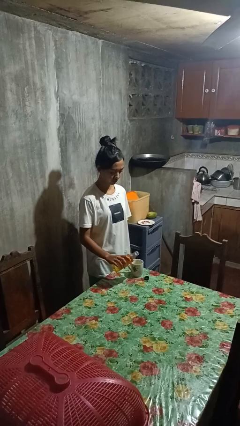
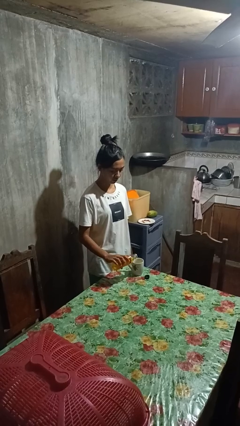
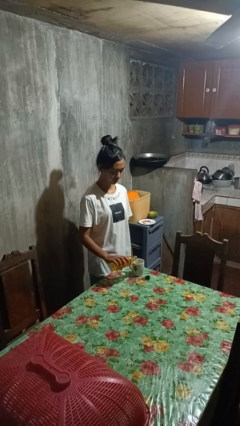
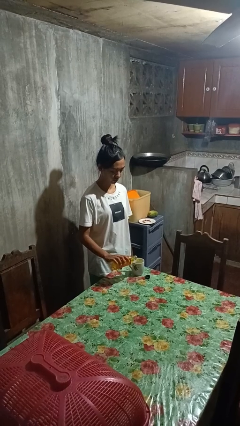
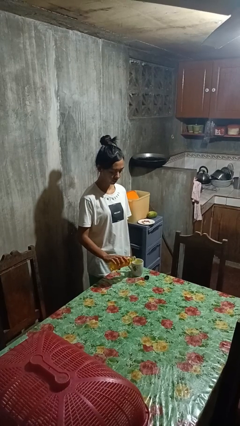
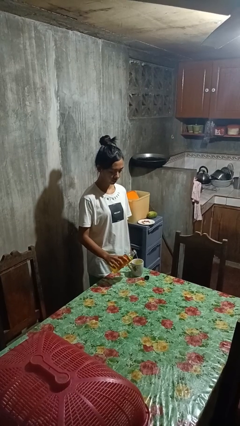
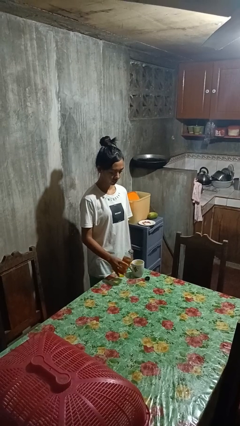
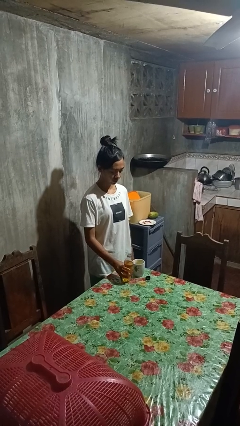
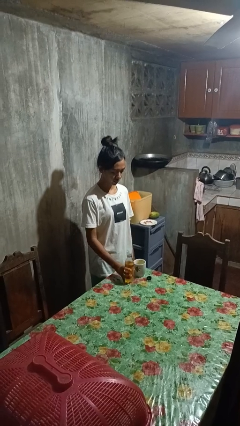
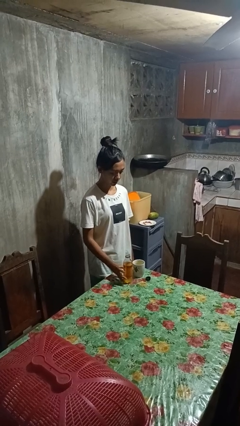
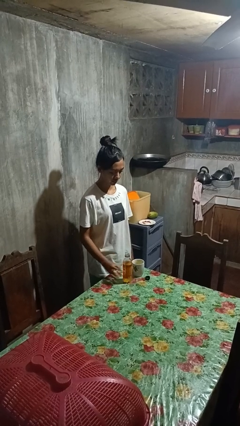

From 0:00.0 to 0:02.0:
person pours liquid into cup

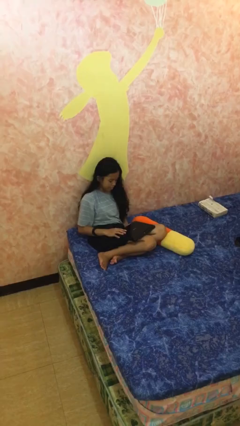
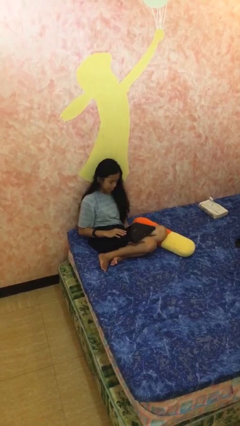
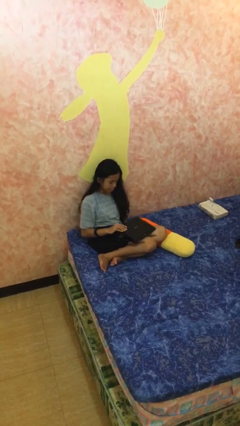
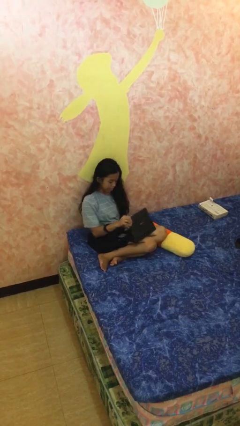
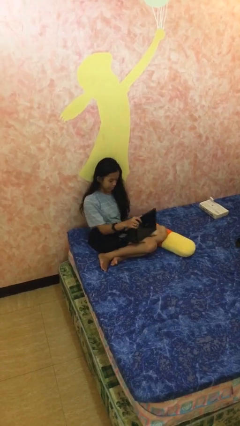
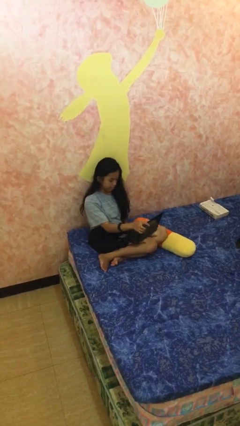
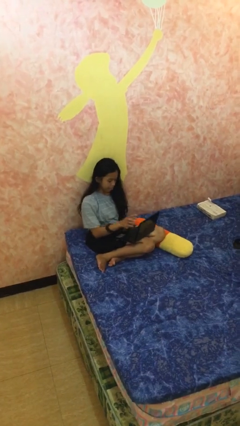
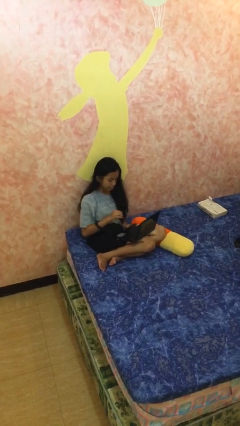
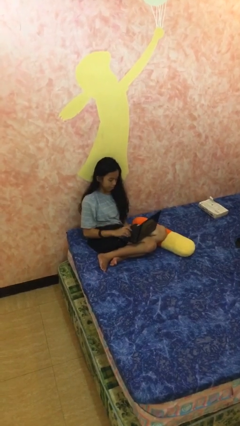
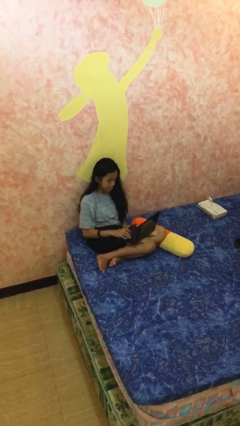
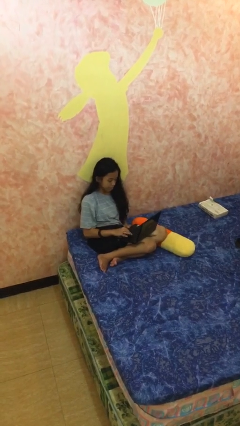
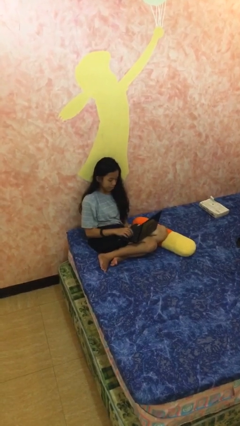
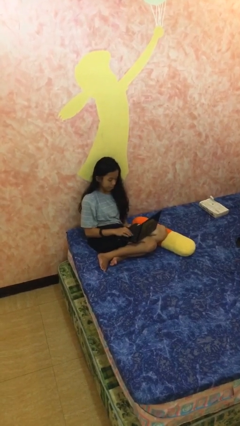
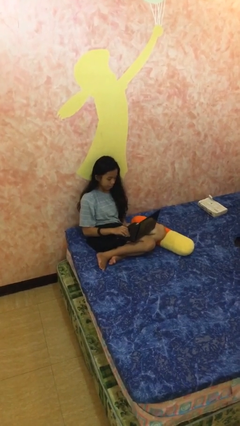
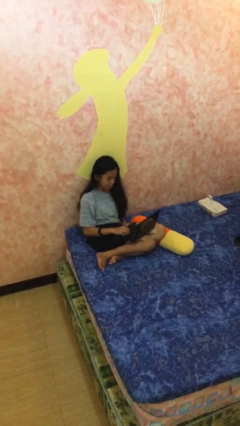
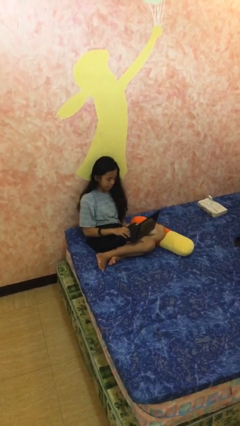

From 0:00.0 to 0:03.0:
person interacts with laptop

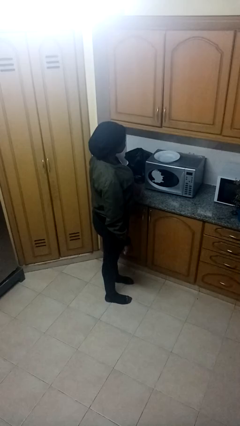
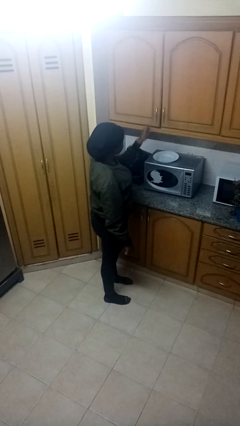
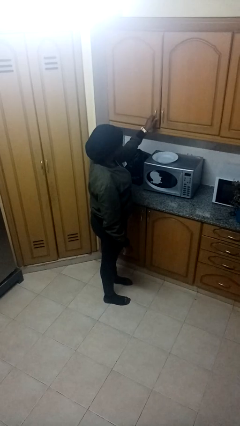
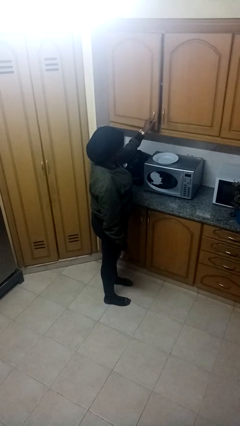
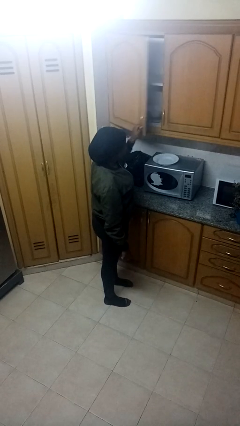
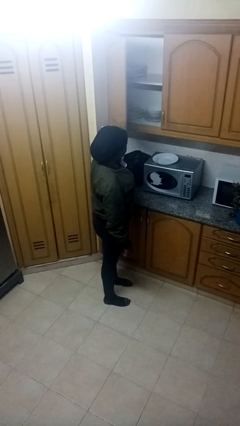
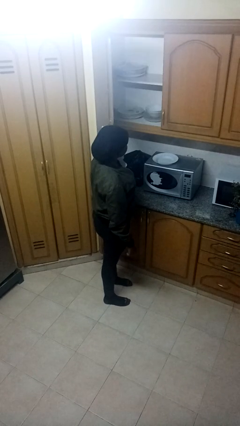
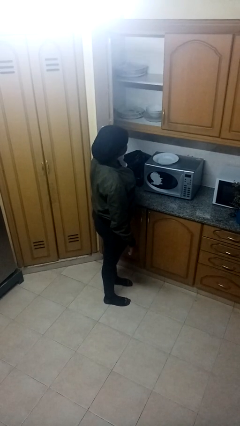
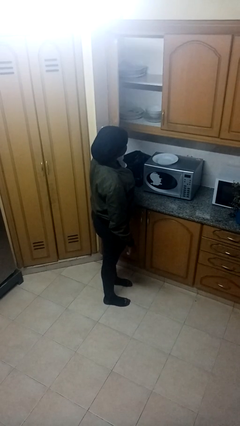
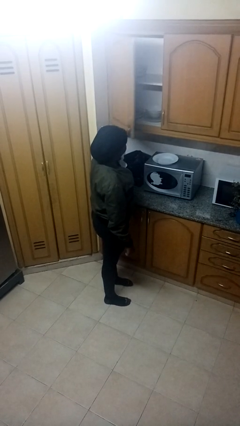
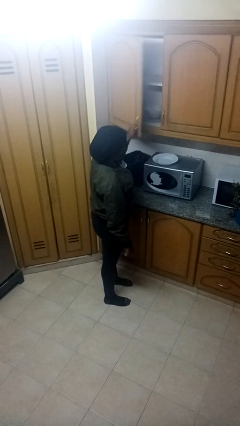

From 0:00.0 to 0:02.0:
person opens cabinet

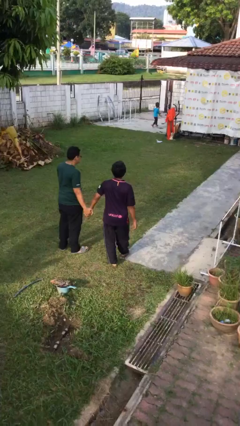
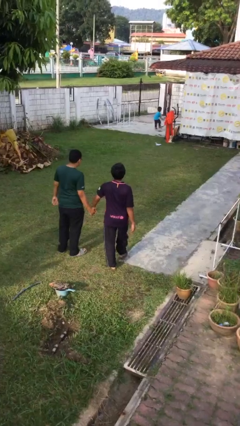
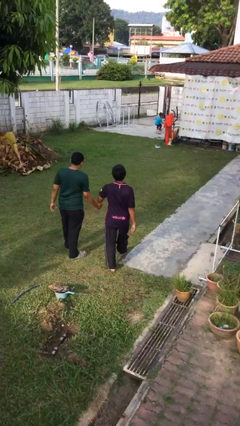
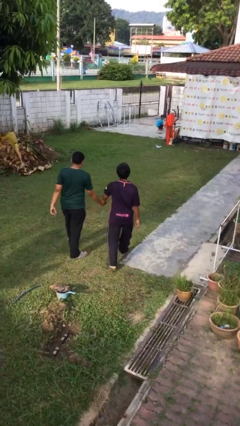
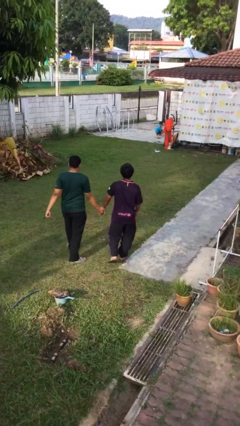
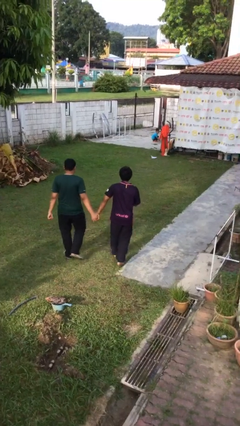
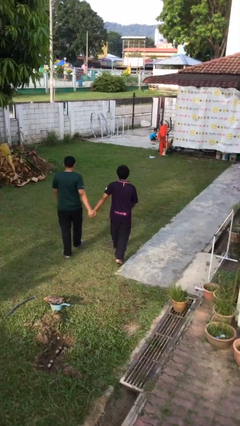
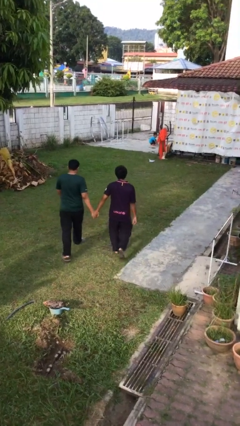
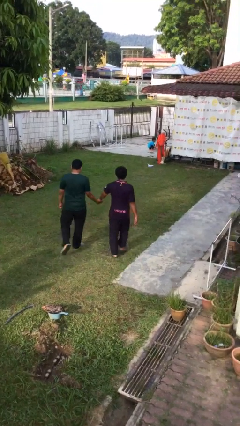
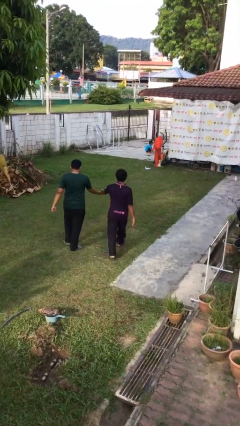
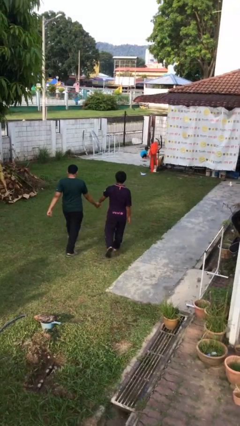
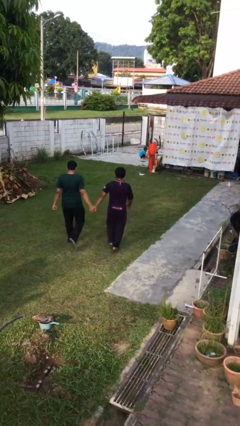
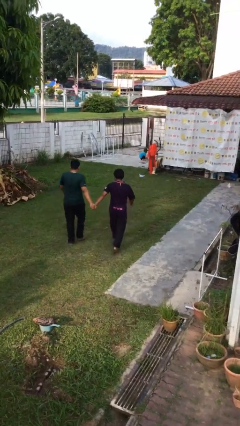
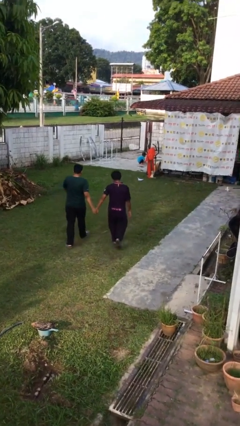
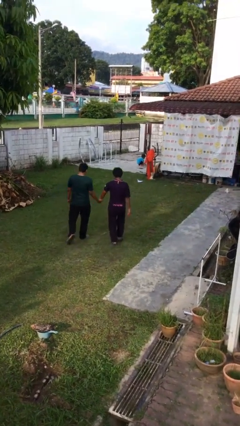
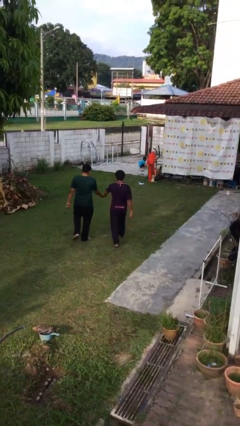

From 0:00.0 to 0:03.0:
person holds hand

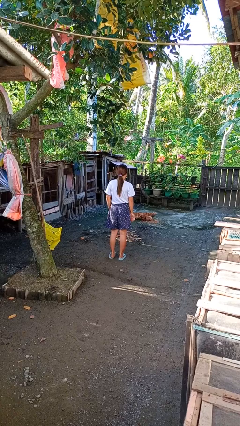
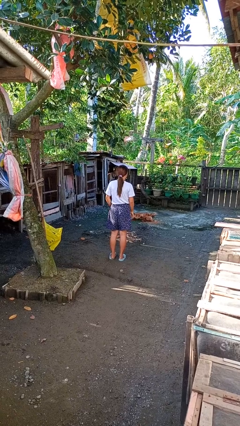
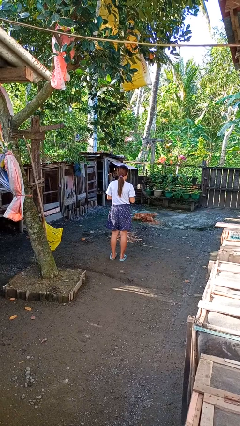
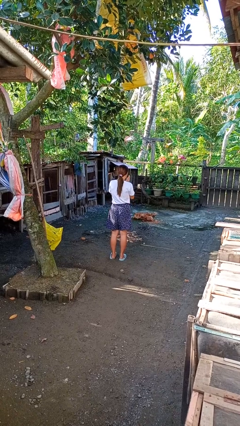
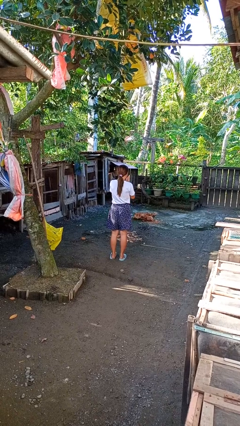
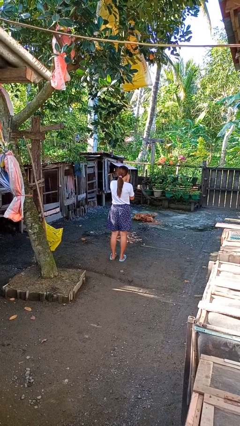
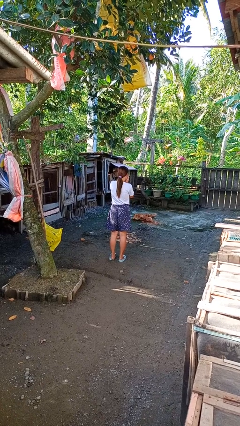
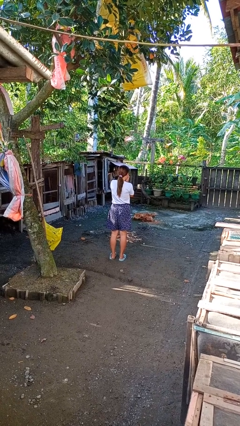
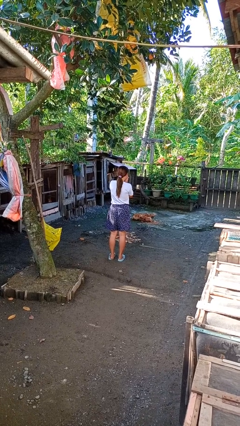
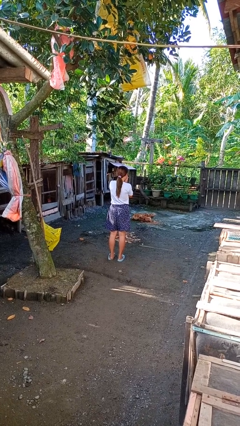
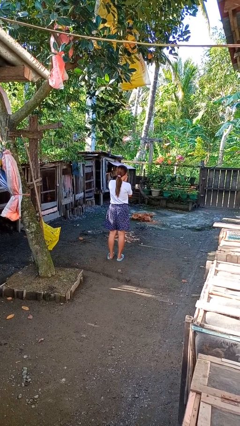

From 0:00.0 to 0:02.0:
person blows into hands

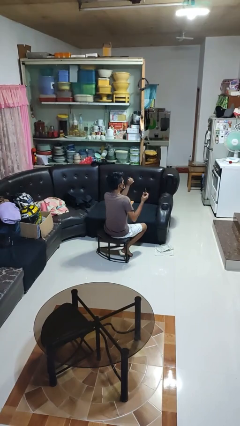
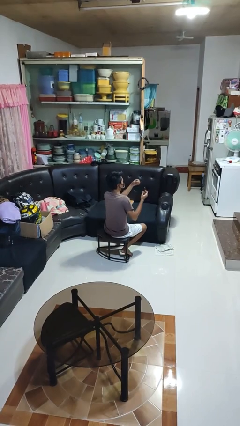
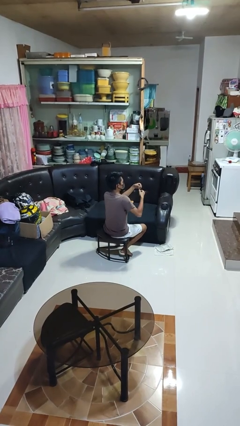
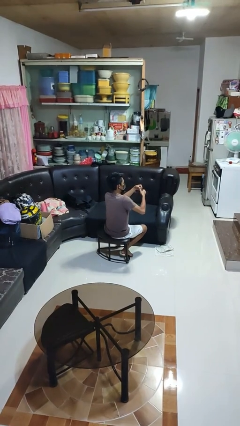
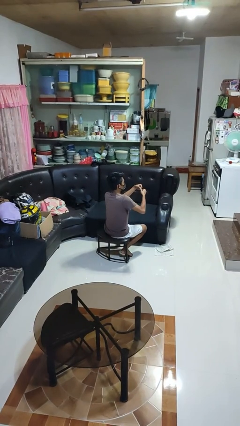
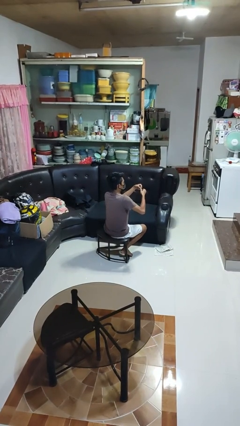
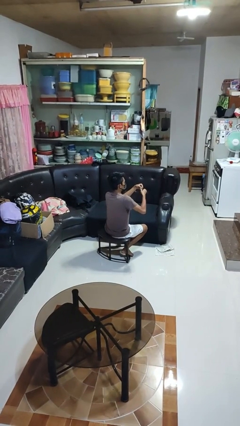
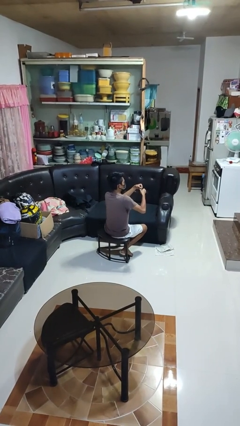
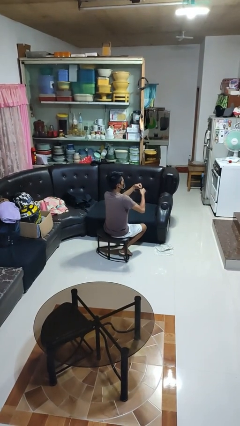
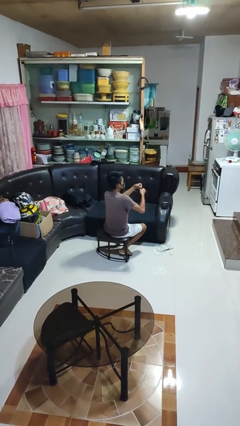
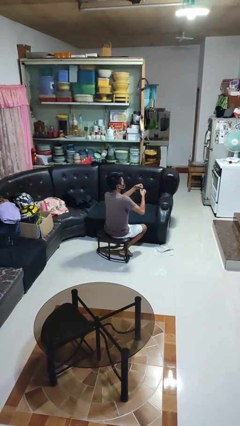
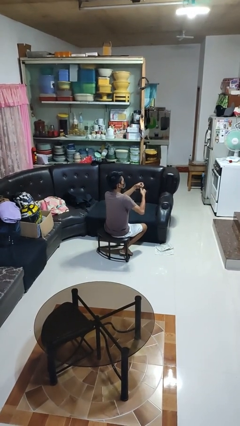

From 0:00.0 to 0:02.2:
person clips fingernails

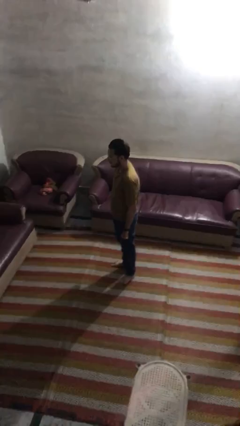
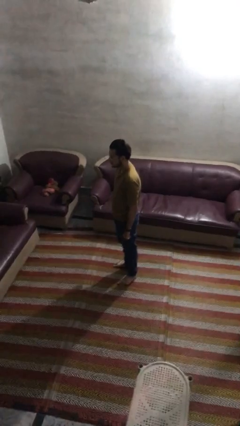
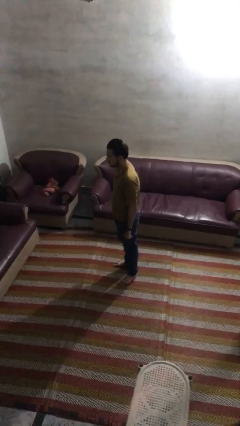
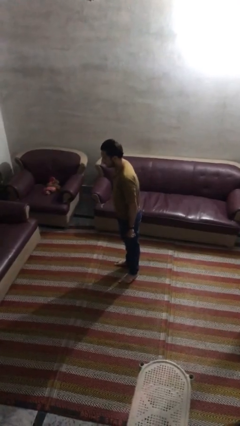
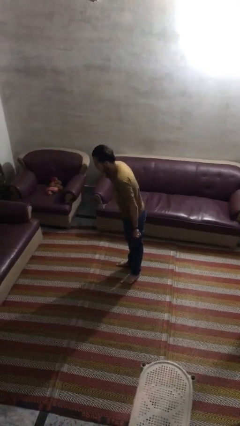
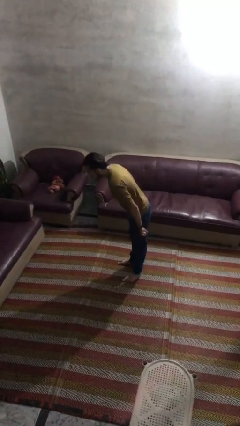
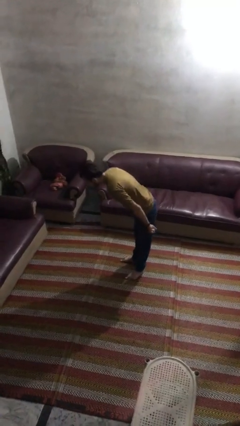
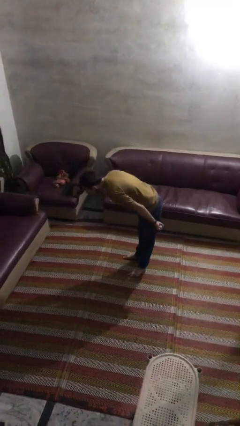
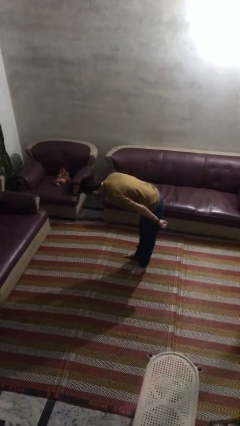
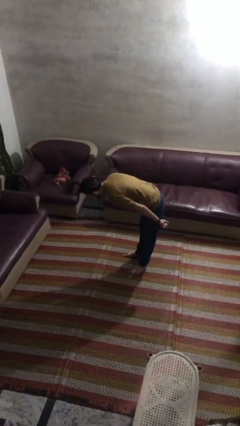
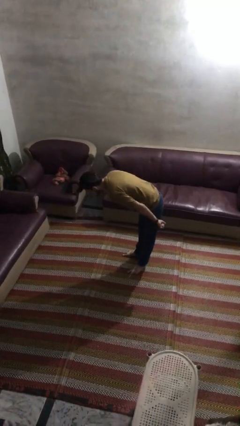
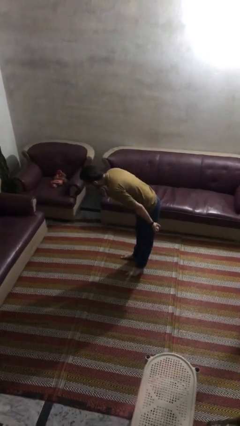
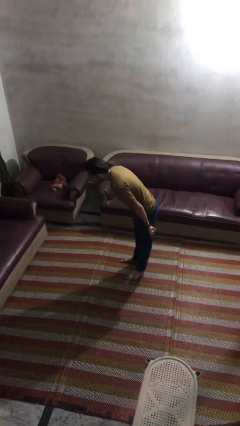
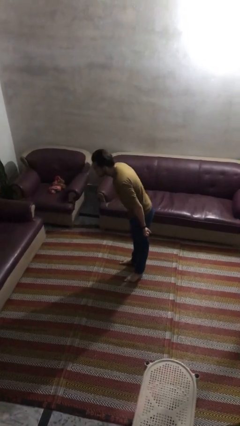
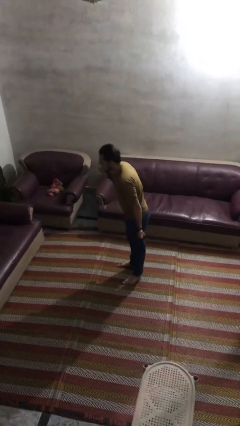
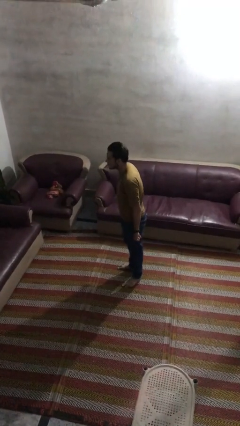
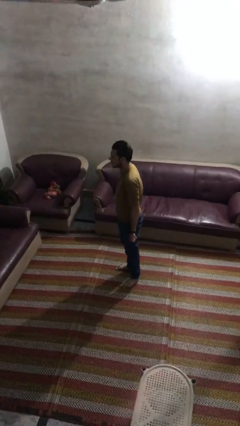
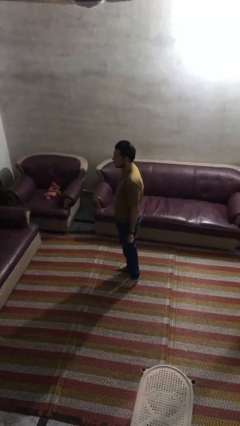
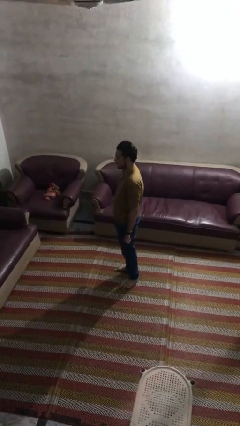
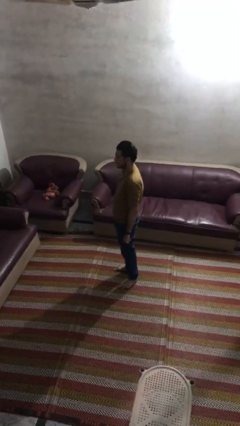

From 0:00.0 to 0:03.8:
person bows
